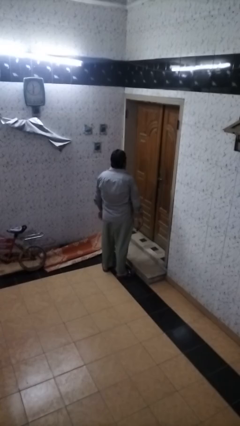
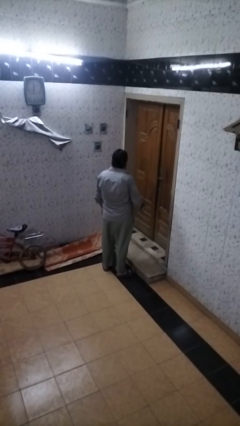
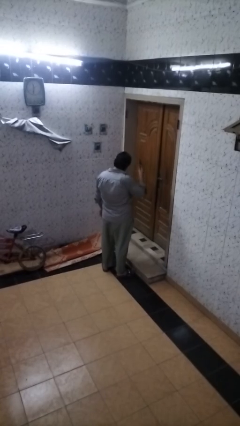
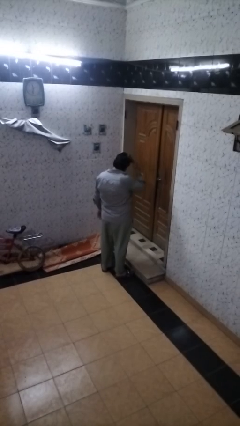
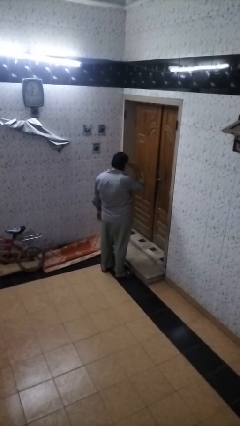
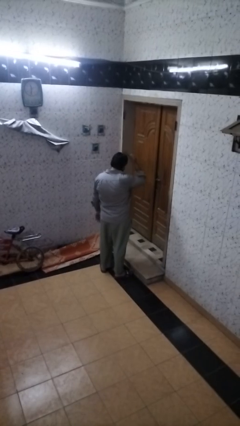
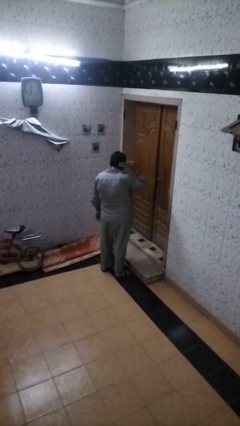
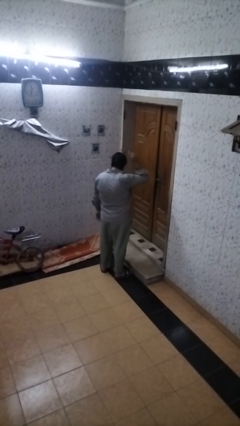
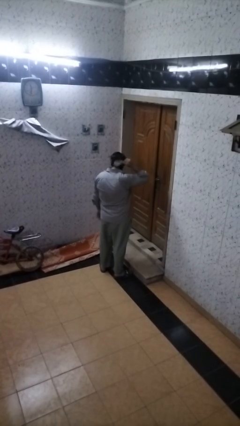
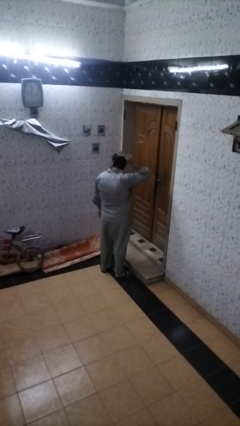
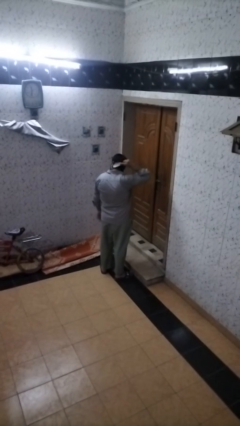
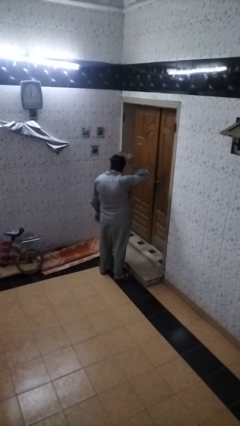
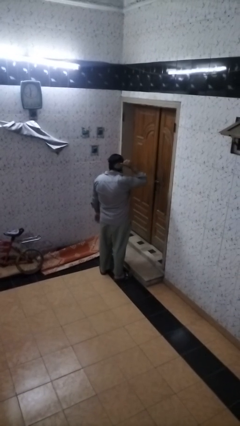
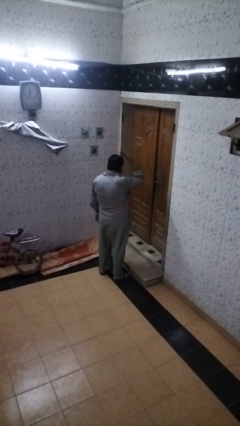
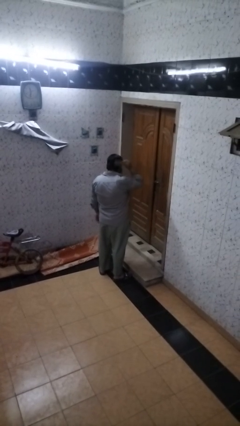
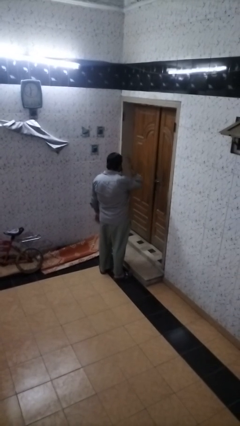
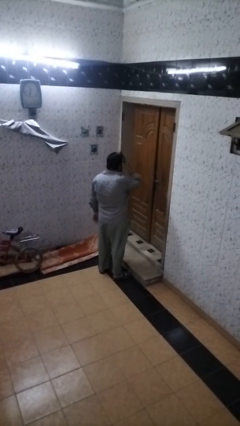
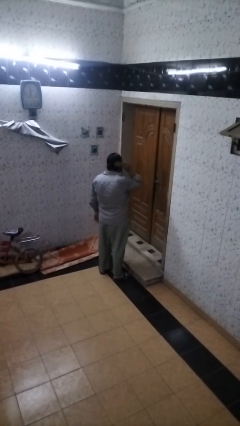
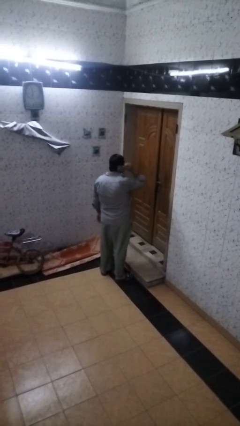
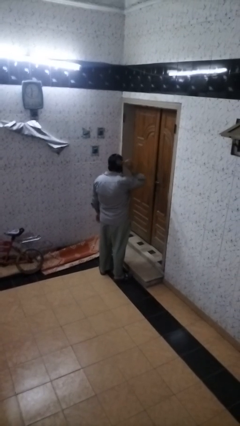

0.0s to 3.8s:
person brushes hair

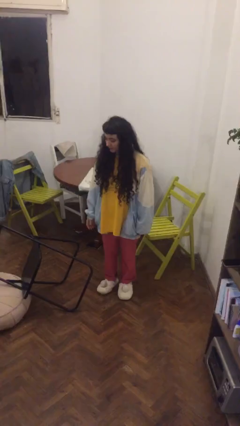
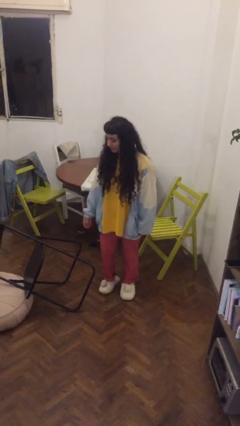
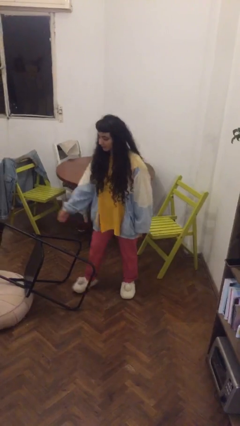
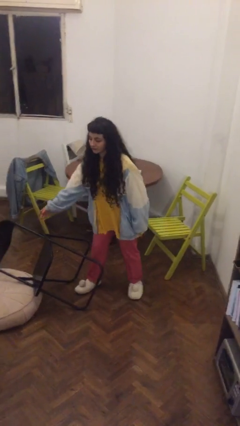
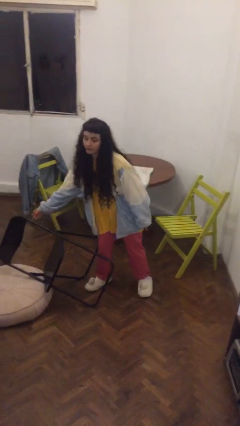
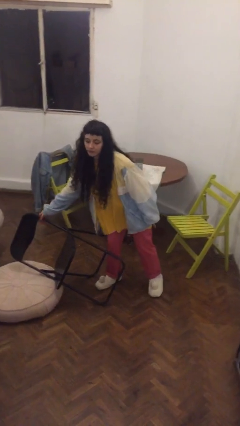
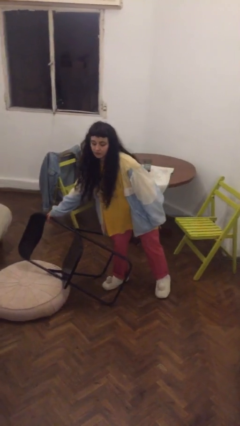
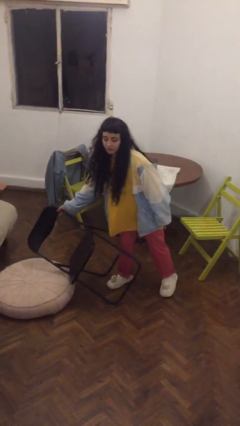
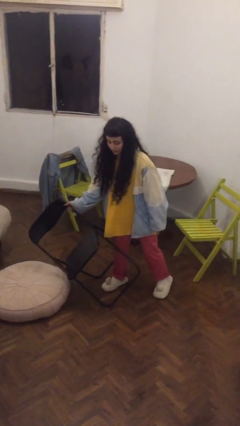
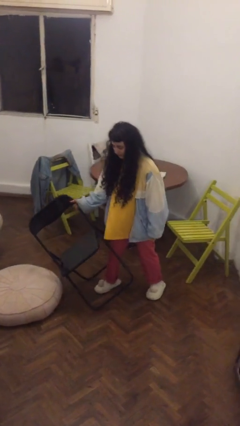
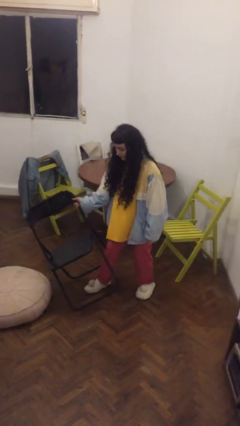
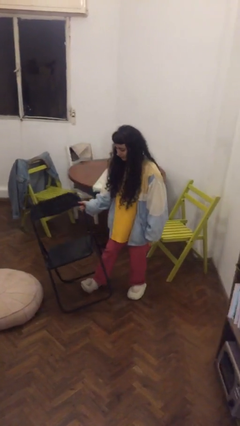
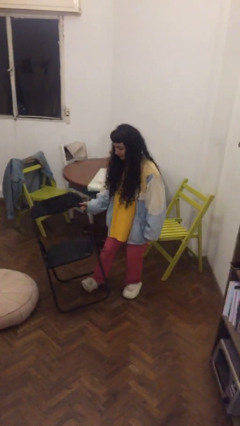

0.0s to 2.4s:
person sets upright furniture

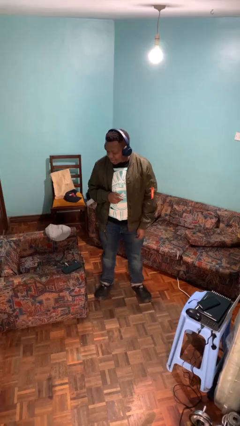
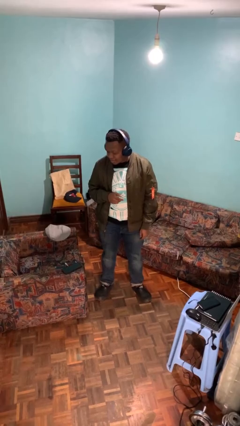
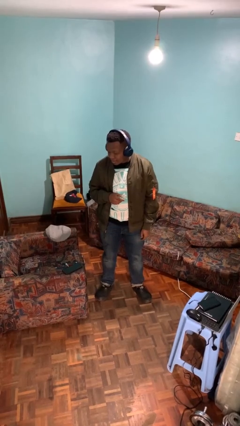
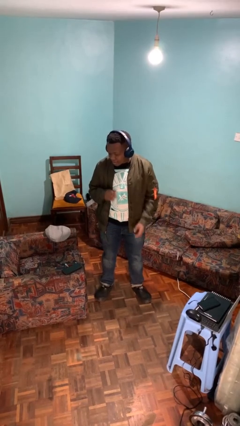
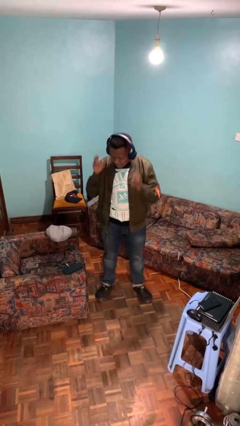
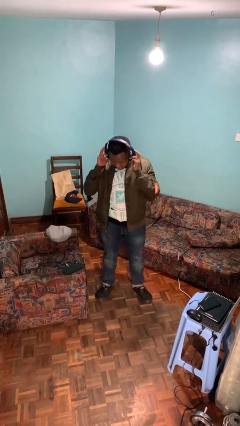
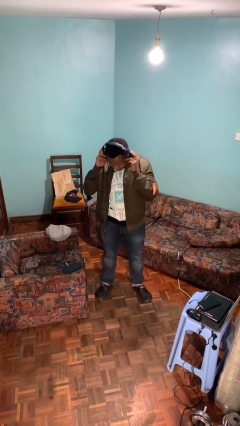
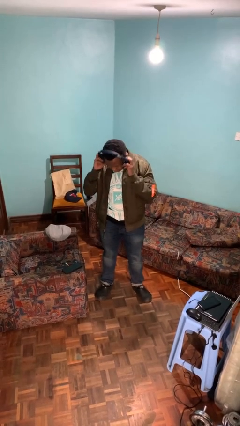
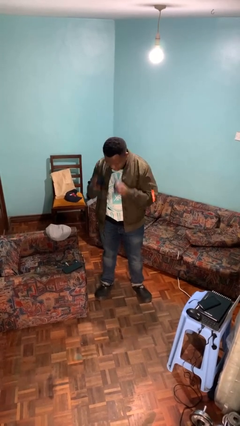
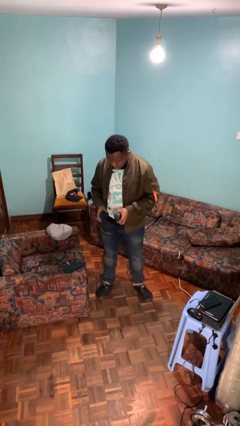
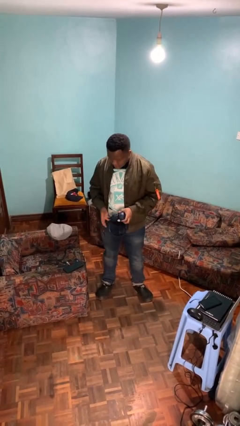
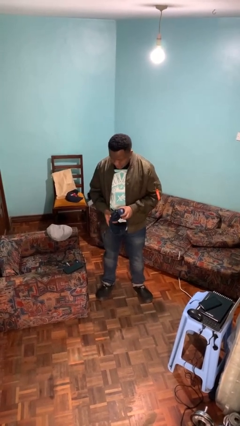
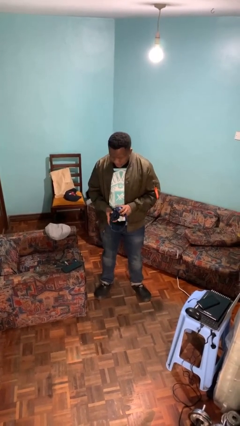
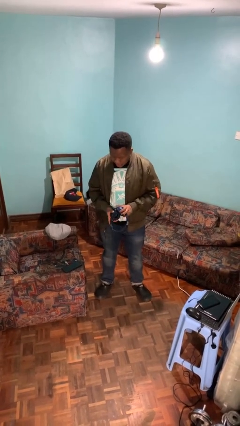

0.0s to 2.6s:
person takes off headphones

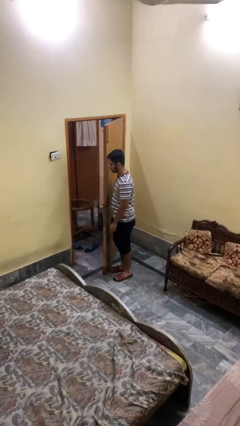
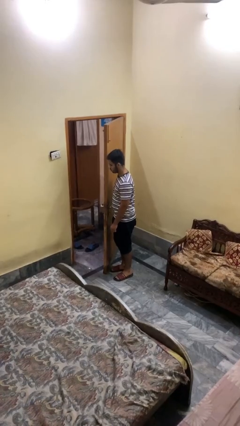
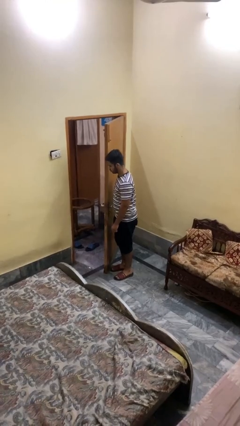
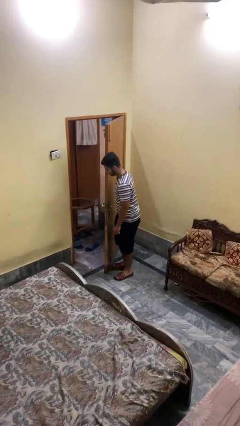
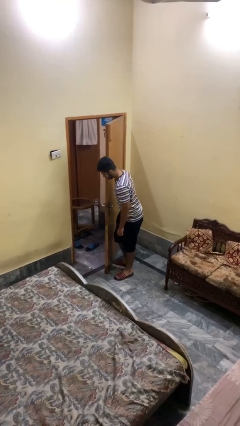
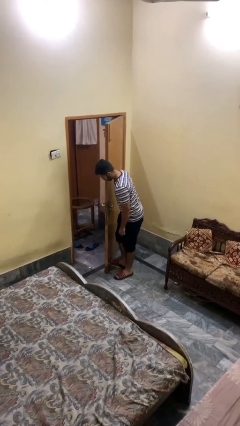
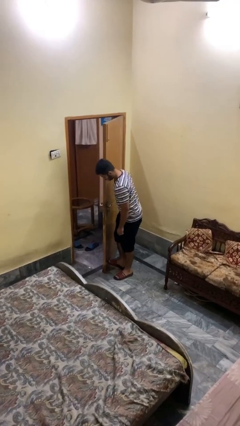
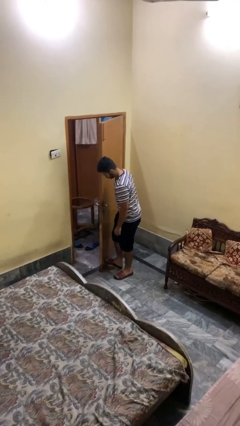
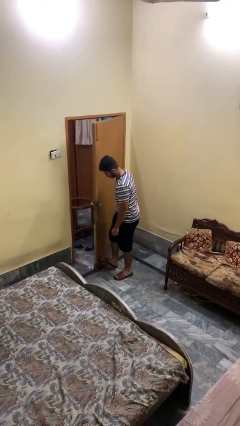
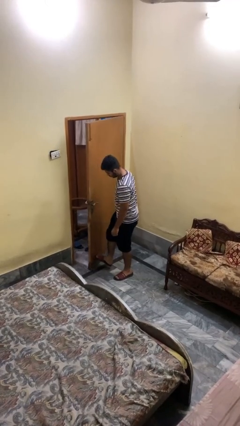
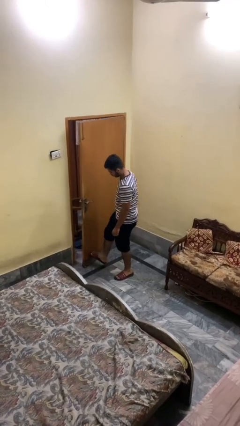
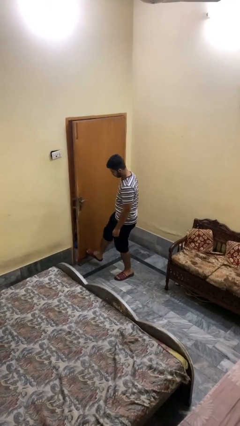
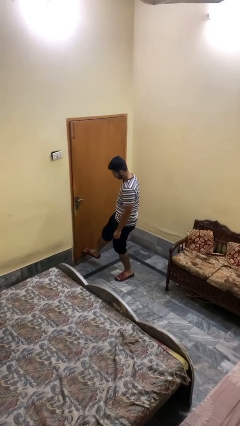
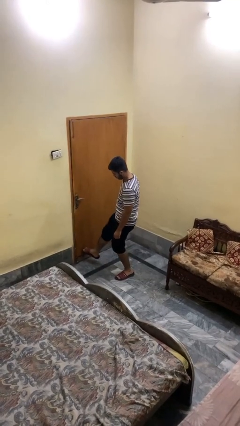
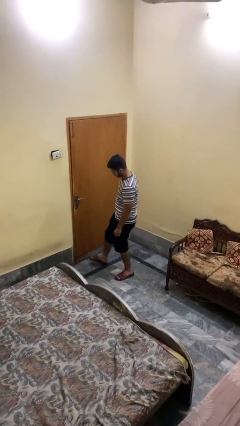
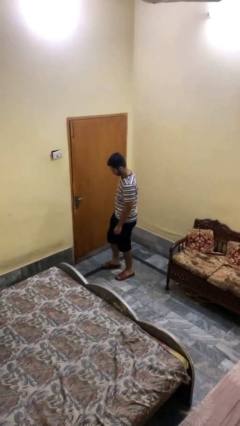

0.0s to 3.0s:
person closes door with foot

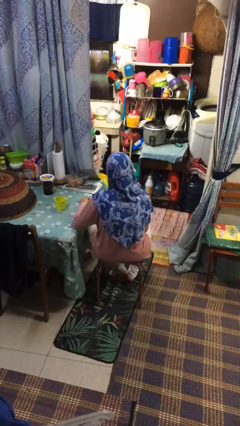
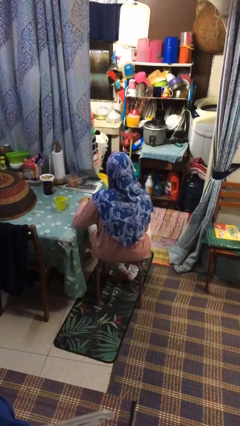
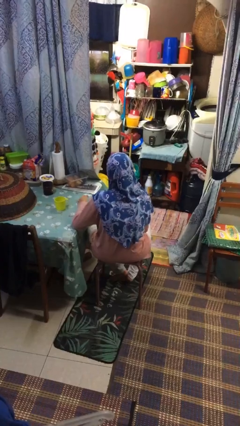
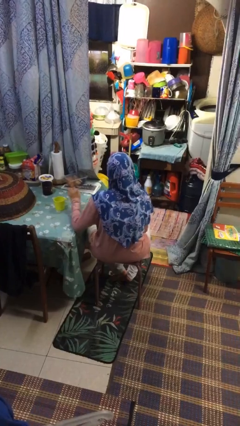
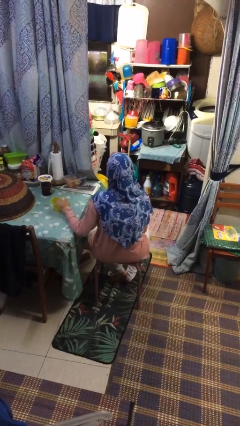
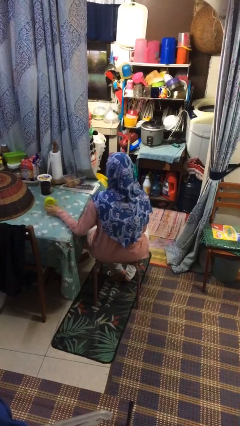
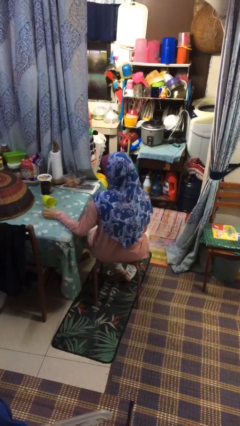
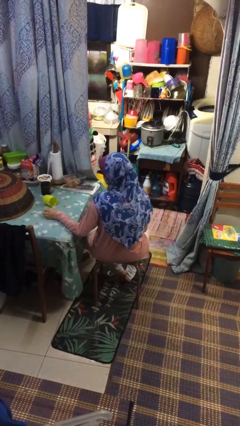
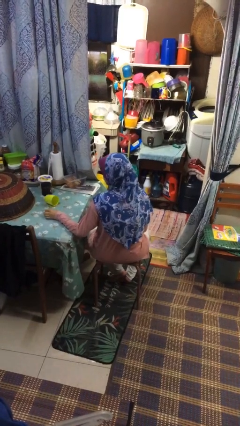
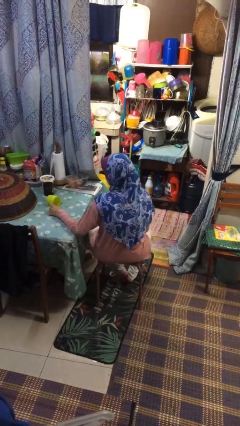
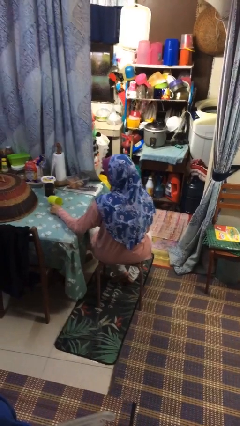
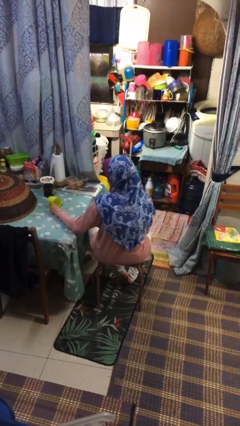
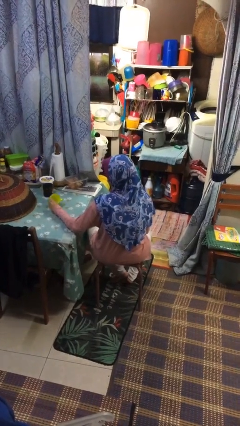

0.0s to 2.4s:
person knocks over glass

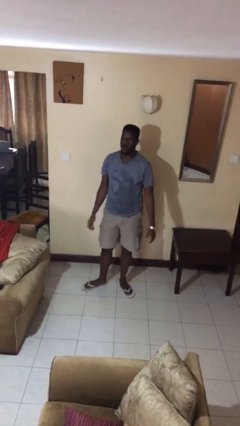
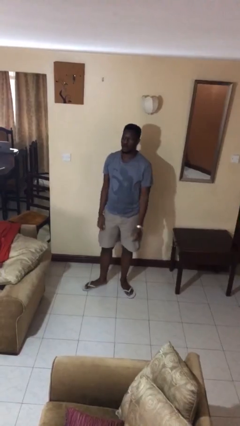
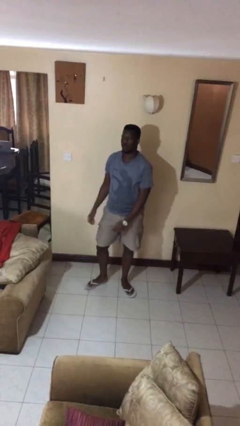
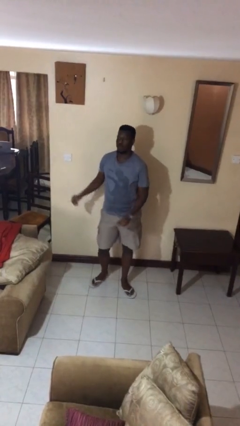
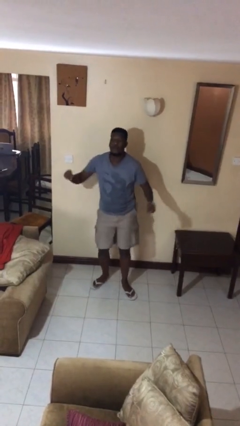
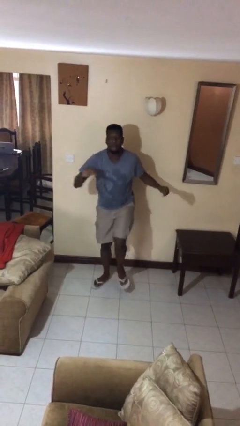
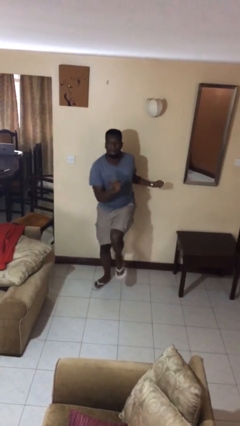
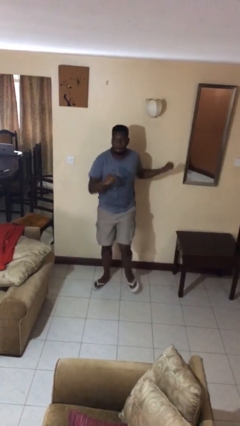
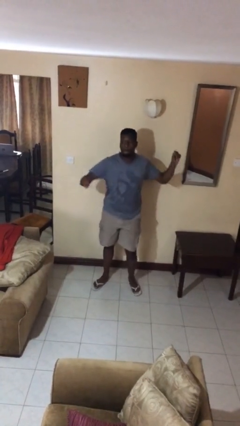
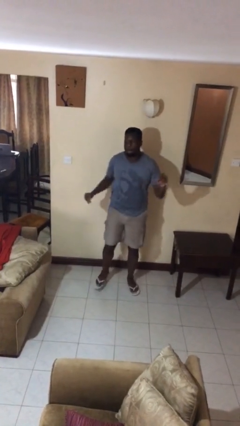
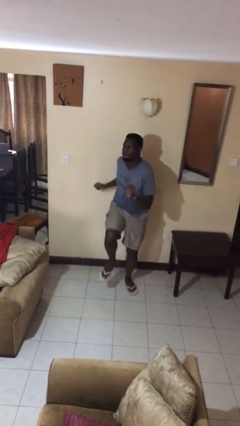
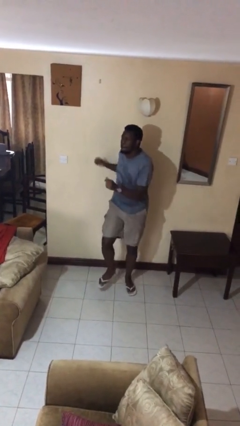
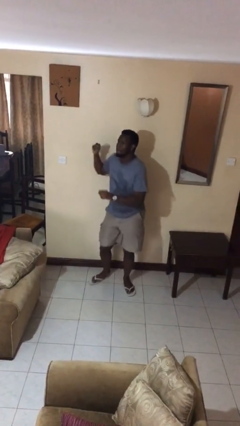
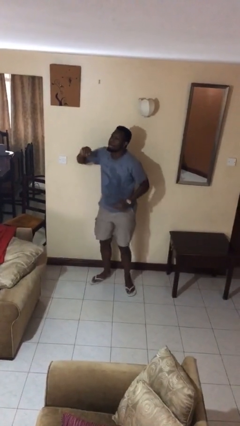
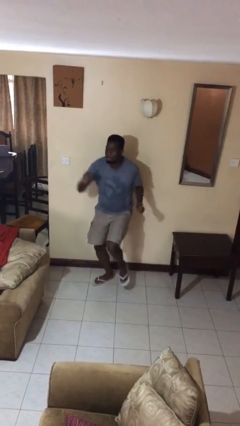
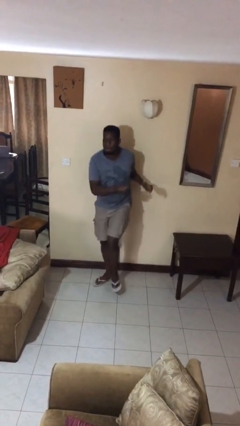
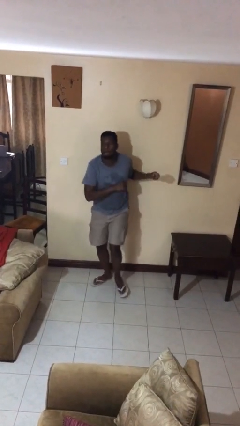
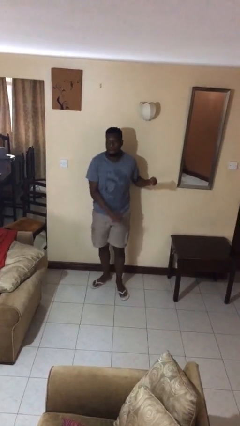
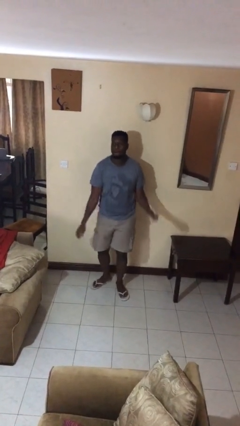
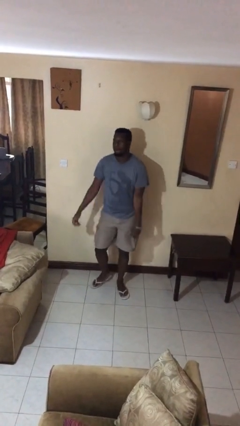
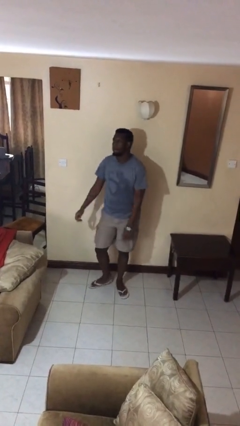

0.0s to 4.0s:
person dances in place
